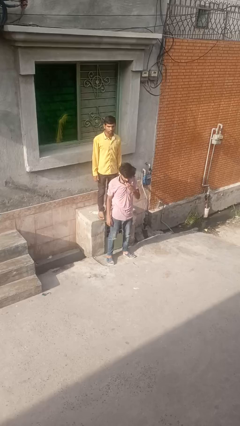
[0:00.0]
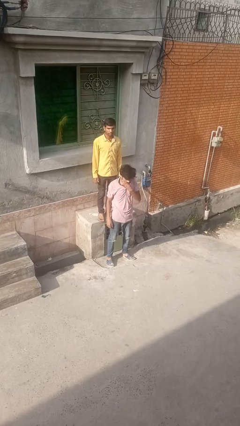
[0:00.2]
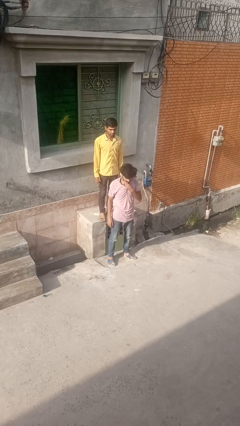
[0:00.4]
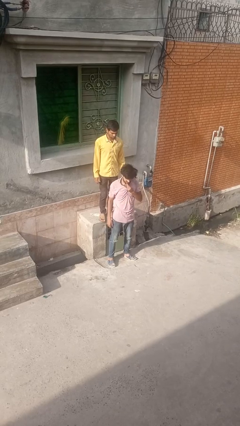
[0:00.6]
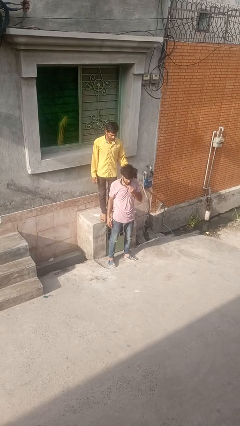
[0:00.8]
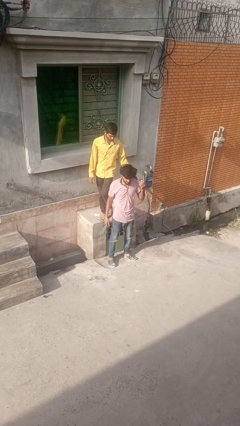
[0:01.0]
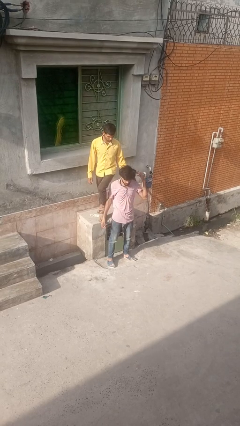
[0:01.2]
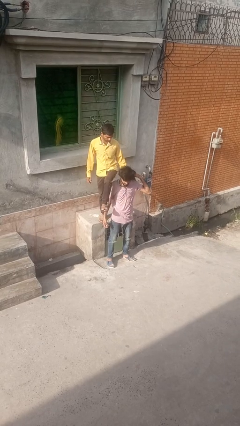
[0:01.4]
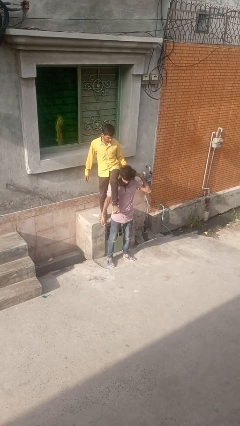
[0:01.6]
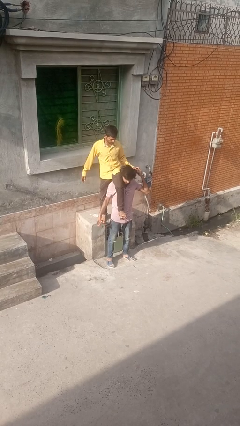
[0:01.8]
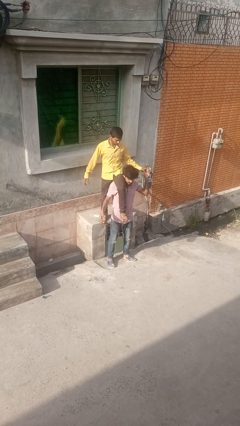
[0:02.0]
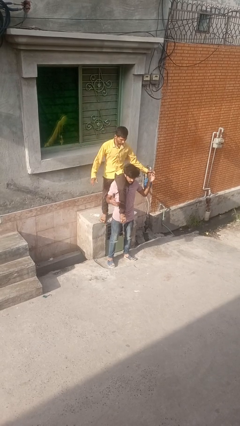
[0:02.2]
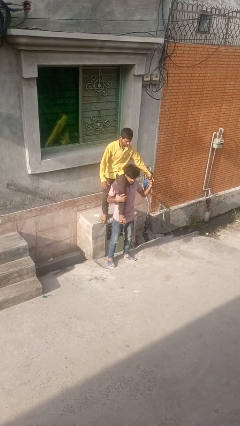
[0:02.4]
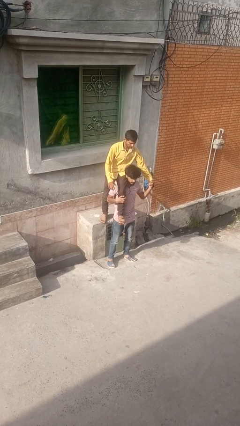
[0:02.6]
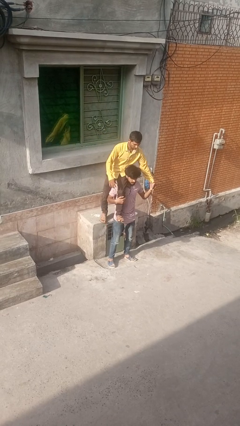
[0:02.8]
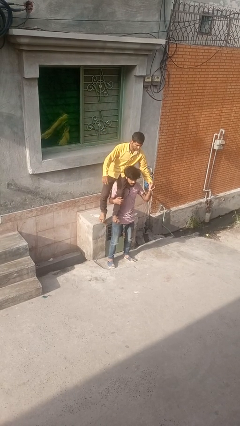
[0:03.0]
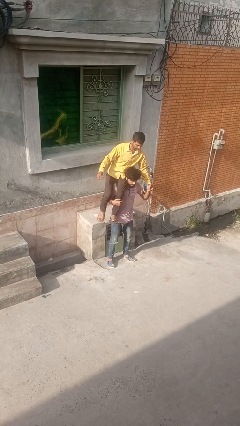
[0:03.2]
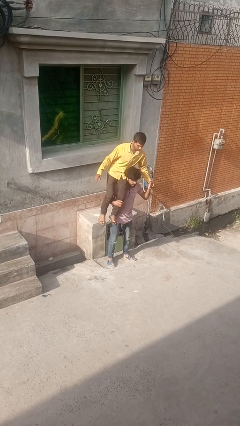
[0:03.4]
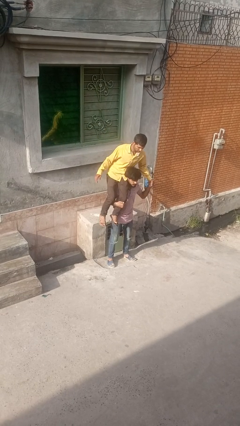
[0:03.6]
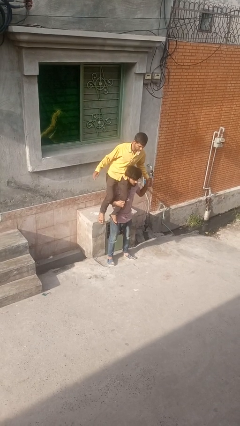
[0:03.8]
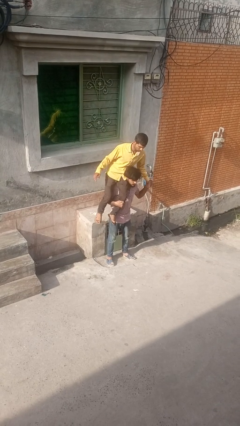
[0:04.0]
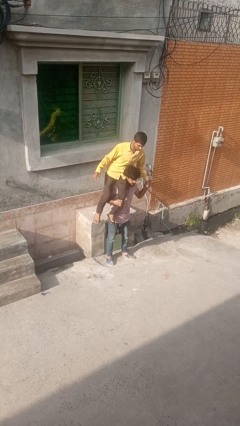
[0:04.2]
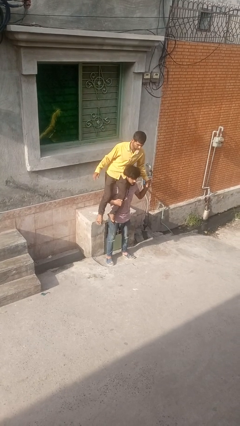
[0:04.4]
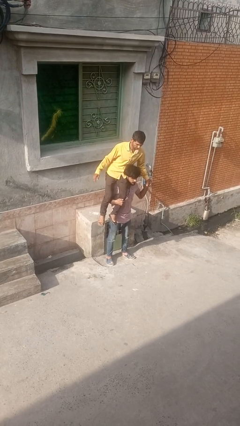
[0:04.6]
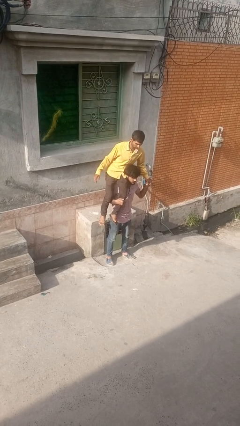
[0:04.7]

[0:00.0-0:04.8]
person carries person over shoulder

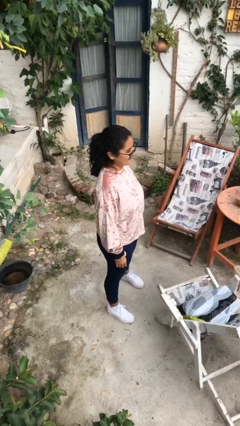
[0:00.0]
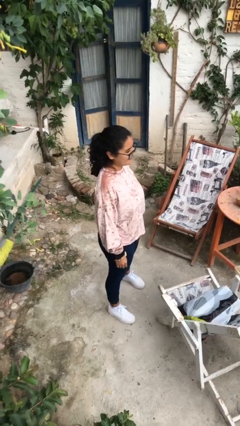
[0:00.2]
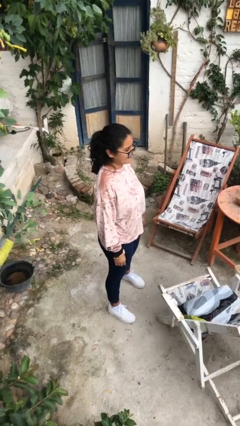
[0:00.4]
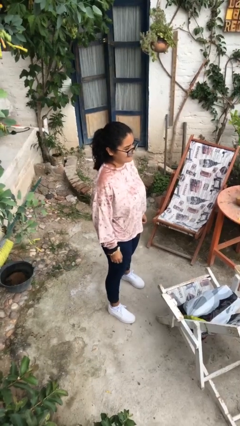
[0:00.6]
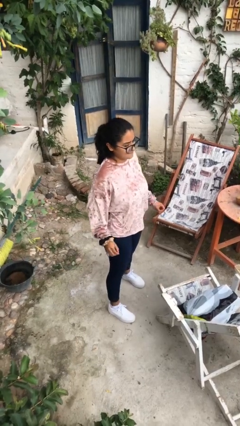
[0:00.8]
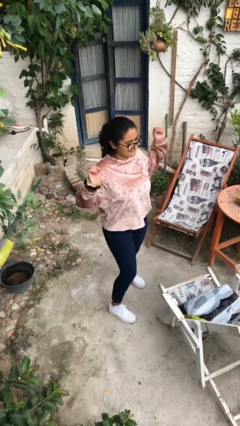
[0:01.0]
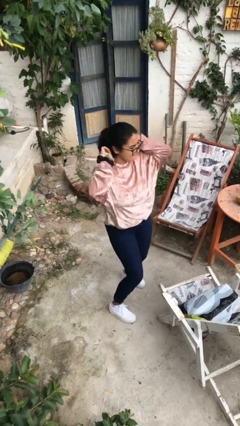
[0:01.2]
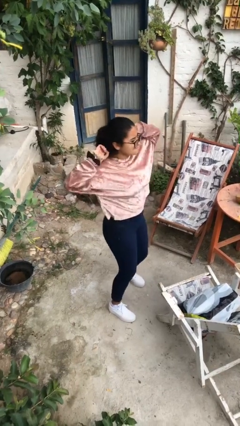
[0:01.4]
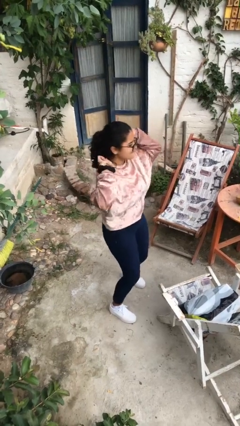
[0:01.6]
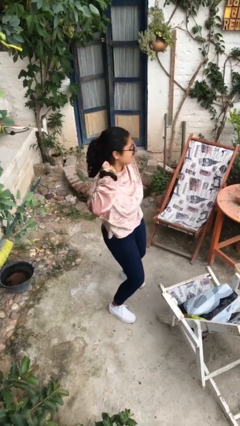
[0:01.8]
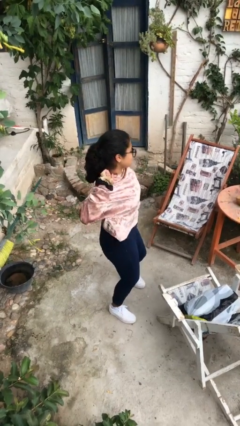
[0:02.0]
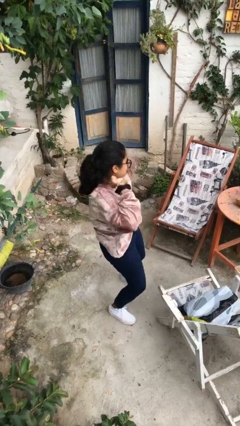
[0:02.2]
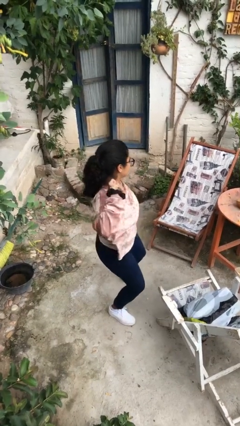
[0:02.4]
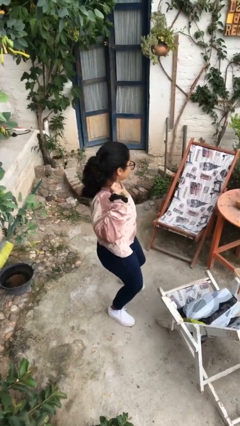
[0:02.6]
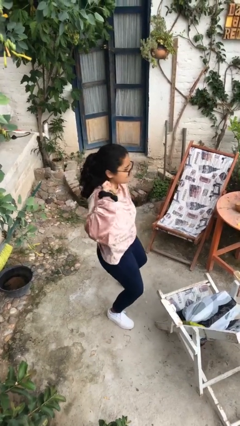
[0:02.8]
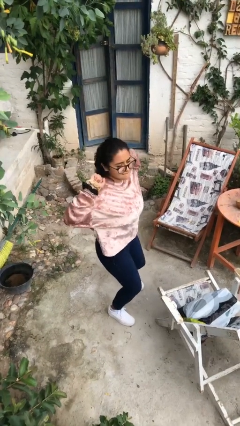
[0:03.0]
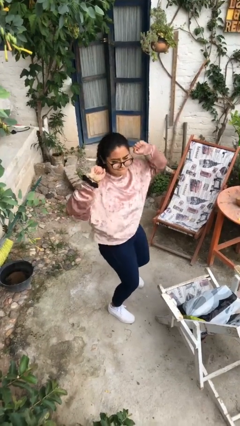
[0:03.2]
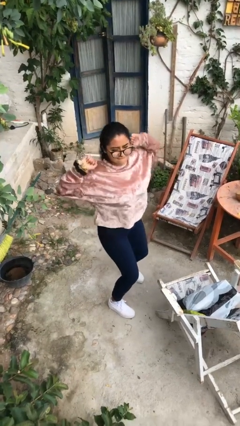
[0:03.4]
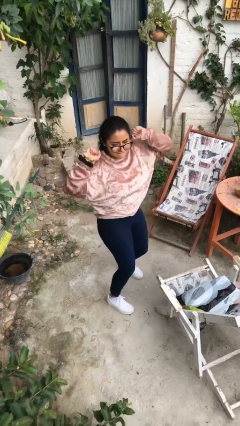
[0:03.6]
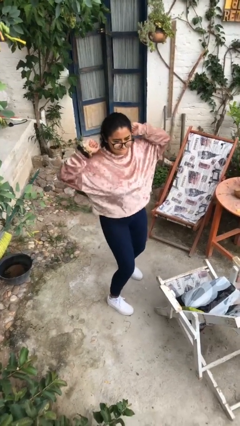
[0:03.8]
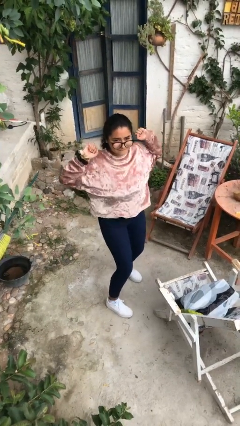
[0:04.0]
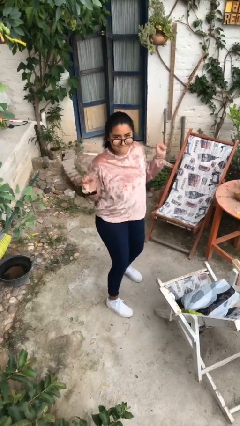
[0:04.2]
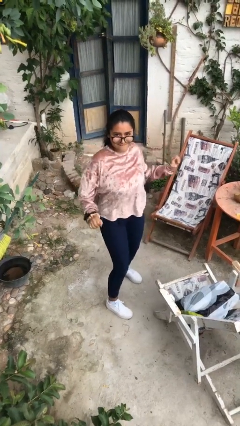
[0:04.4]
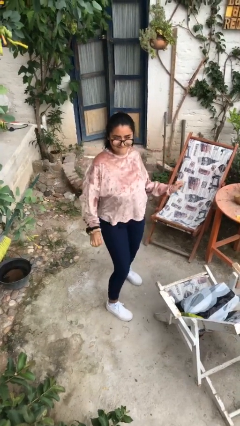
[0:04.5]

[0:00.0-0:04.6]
person dances in place

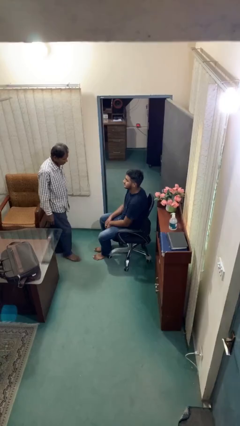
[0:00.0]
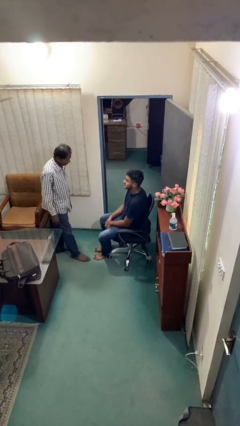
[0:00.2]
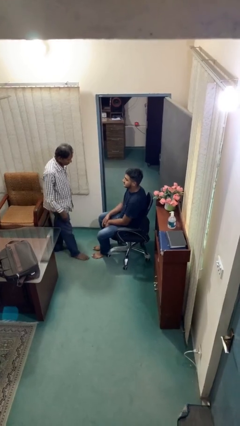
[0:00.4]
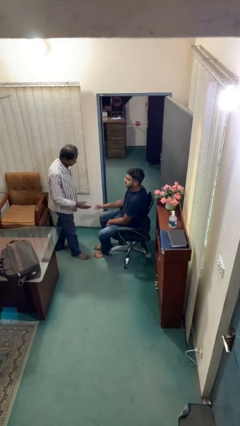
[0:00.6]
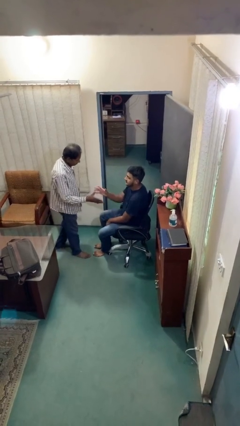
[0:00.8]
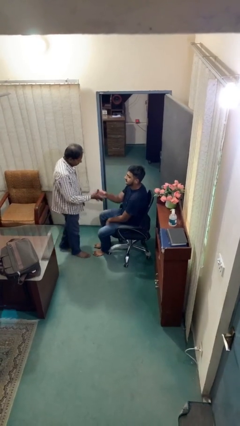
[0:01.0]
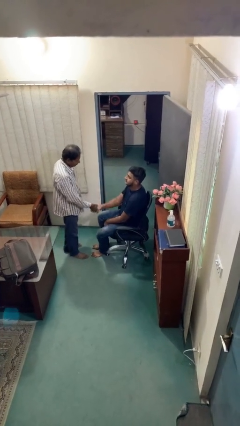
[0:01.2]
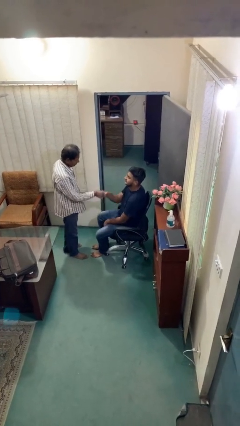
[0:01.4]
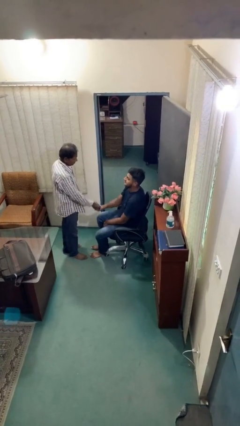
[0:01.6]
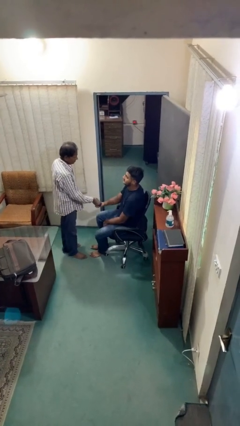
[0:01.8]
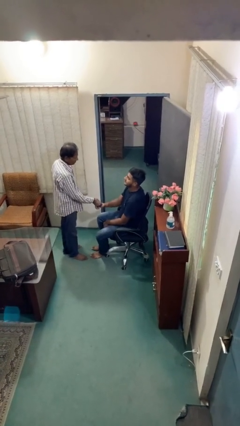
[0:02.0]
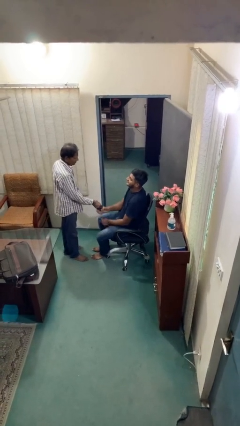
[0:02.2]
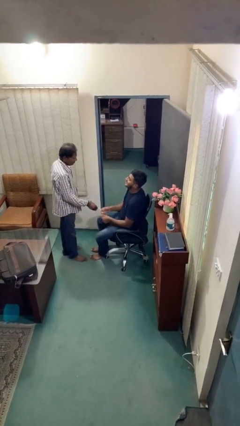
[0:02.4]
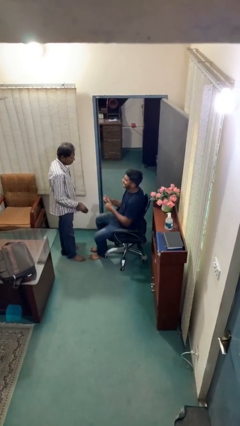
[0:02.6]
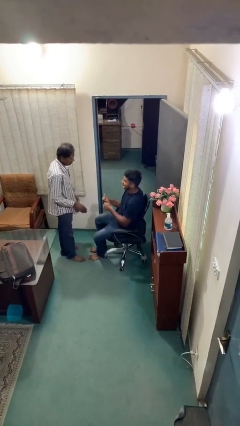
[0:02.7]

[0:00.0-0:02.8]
person shakes hand

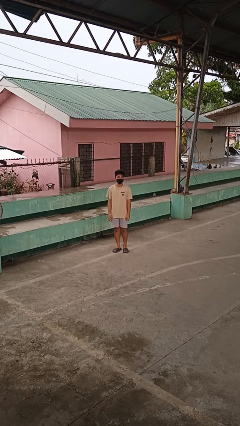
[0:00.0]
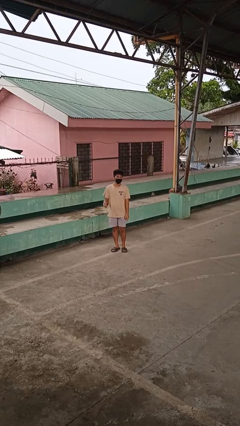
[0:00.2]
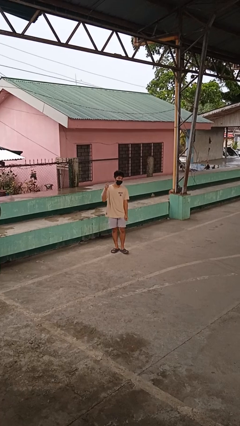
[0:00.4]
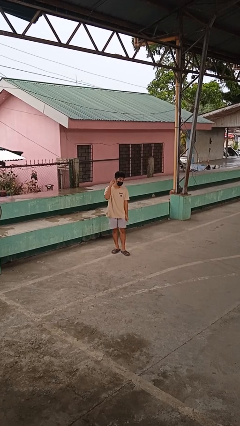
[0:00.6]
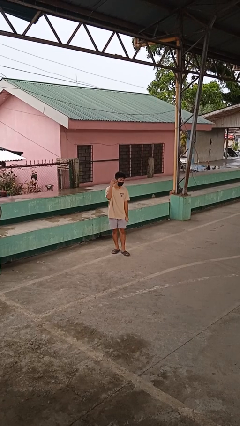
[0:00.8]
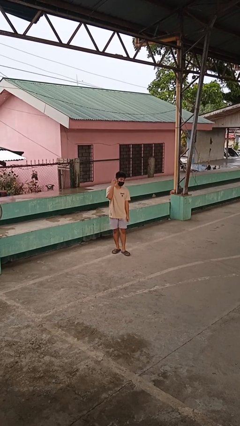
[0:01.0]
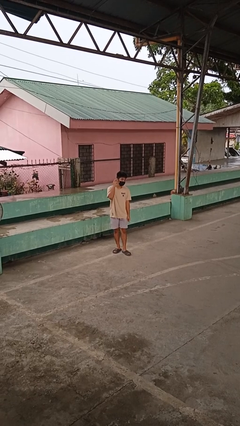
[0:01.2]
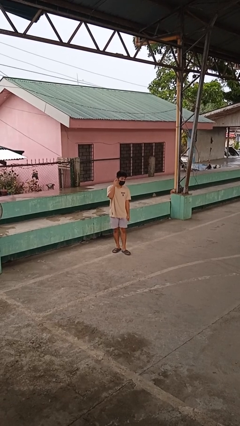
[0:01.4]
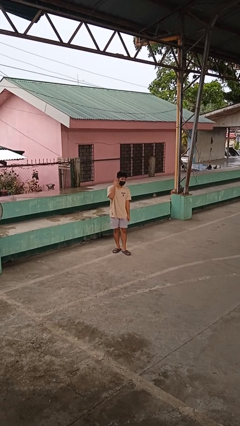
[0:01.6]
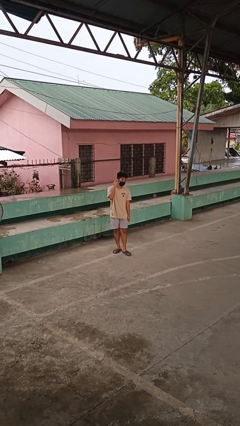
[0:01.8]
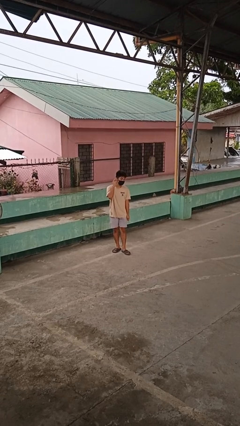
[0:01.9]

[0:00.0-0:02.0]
person gestures listen closely

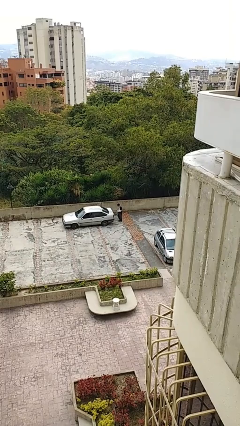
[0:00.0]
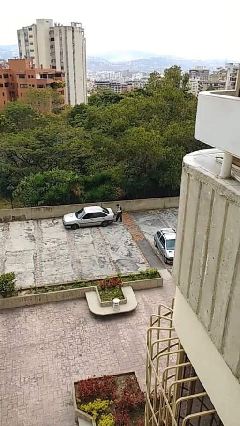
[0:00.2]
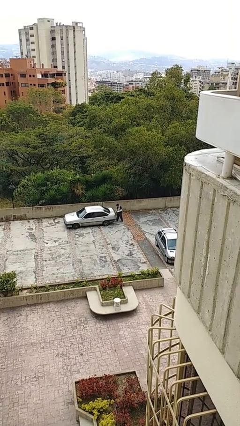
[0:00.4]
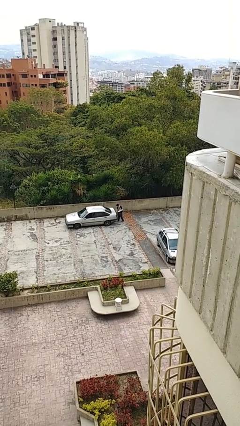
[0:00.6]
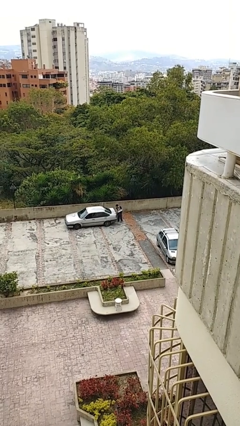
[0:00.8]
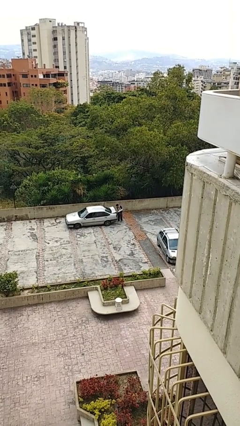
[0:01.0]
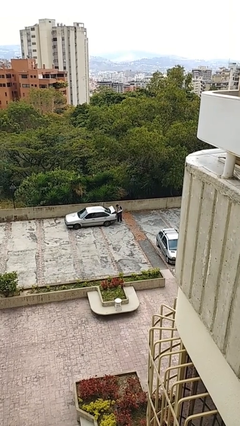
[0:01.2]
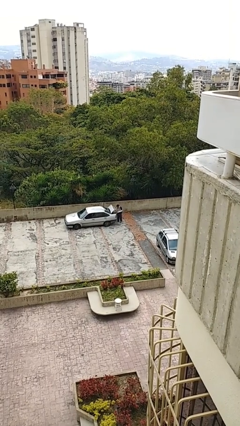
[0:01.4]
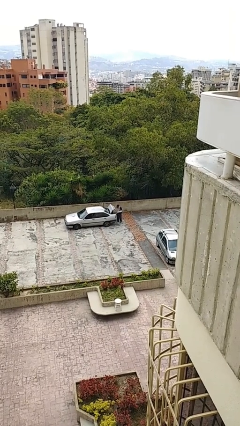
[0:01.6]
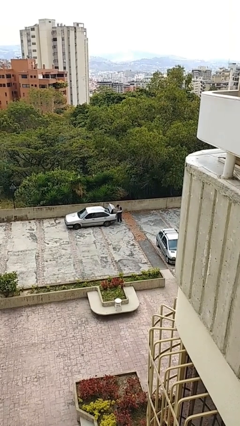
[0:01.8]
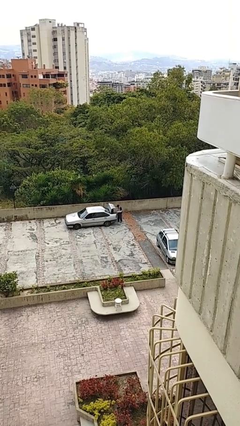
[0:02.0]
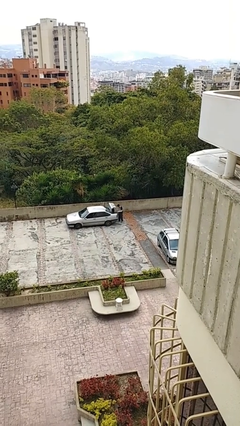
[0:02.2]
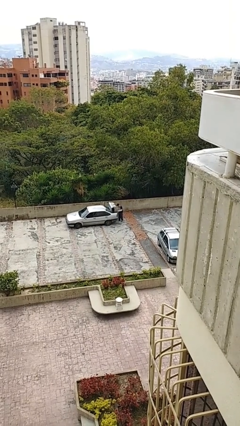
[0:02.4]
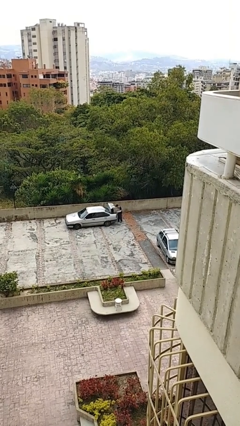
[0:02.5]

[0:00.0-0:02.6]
person opens car trunk

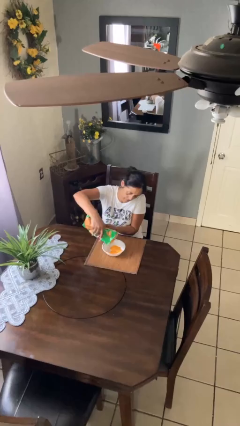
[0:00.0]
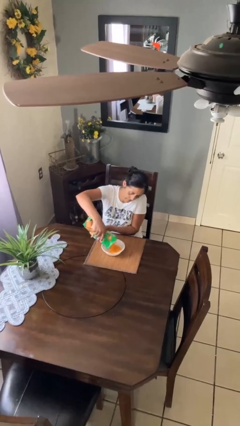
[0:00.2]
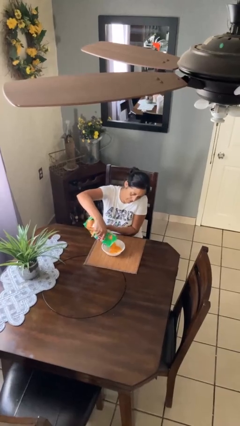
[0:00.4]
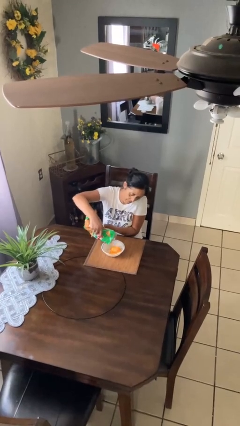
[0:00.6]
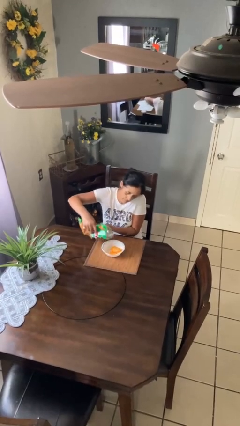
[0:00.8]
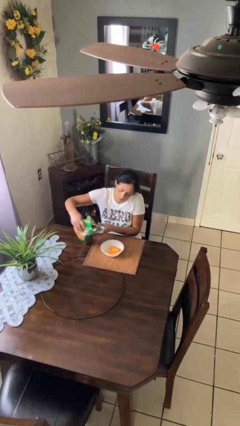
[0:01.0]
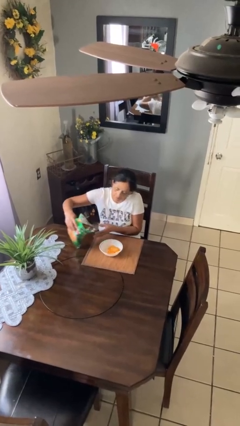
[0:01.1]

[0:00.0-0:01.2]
person pours into bowl
